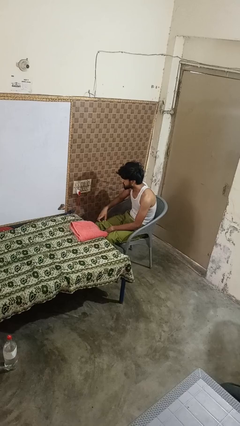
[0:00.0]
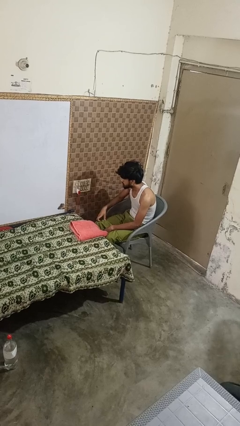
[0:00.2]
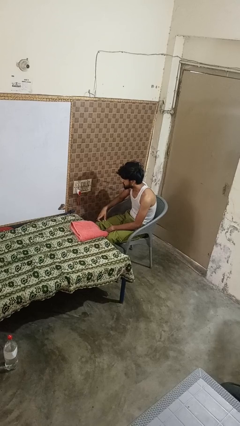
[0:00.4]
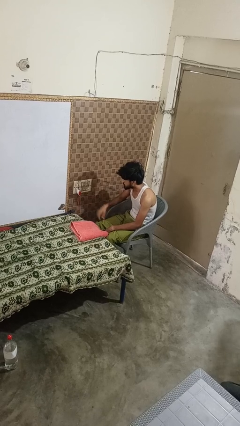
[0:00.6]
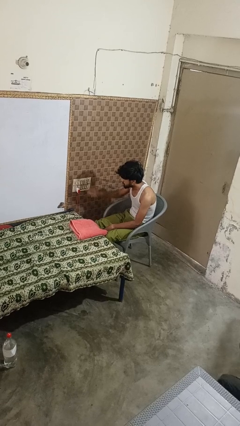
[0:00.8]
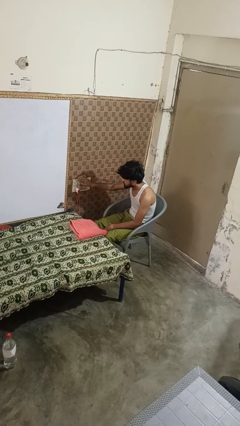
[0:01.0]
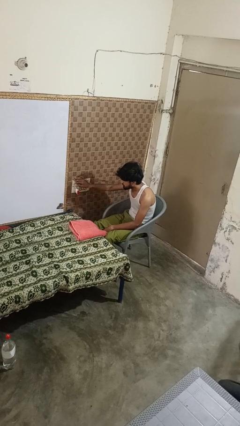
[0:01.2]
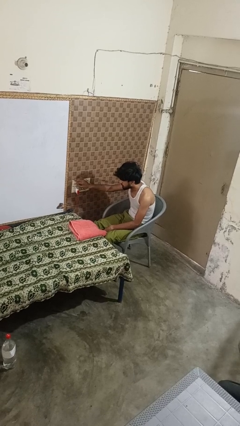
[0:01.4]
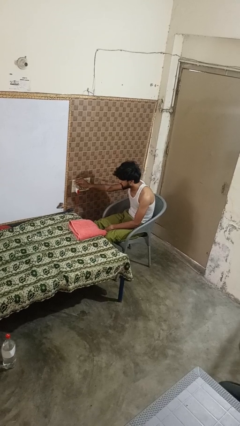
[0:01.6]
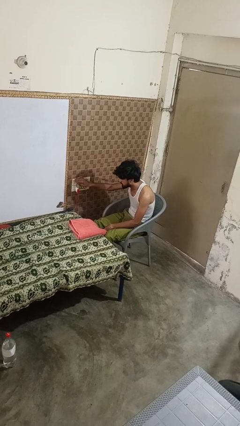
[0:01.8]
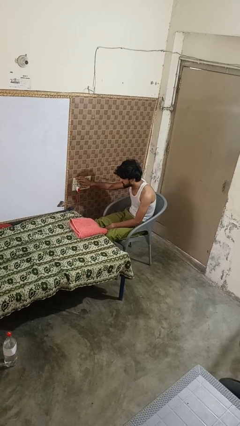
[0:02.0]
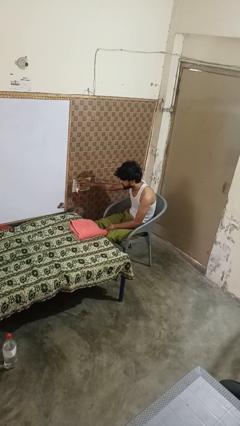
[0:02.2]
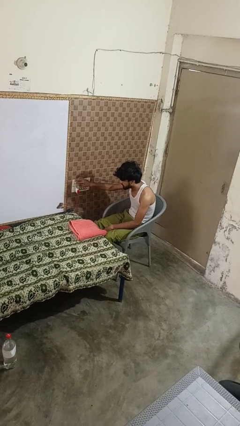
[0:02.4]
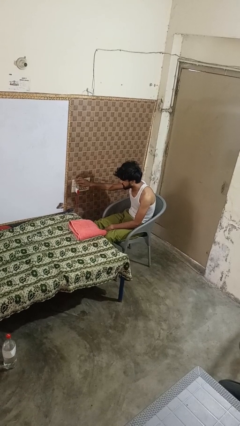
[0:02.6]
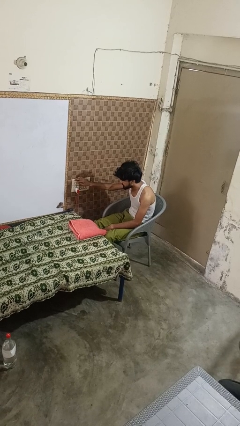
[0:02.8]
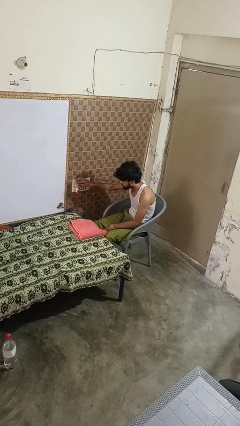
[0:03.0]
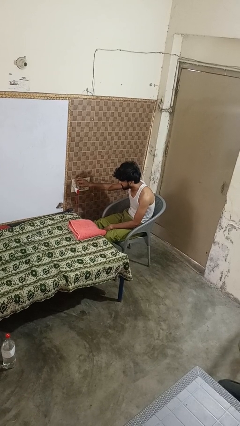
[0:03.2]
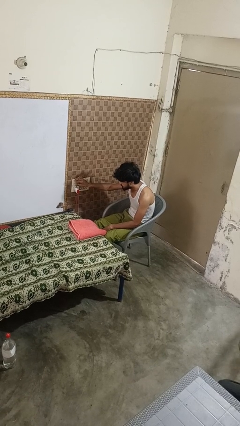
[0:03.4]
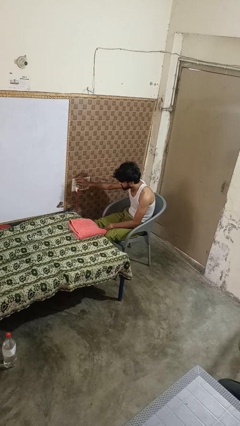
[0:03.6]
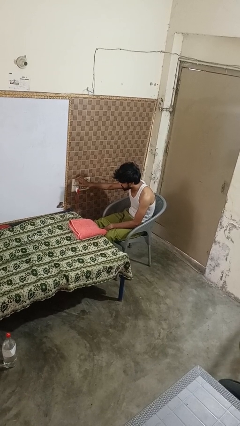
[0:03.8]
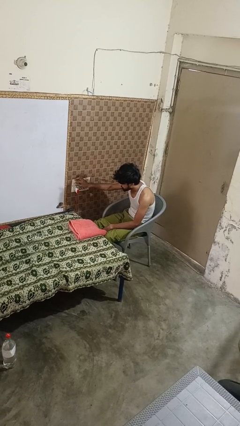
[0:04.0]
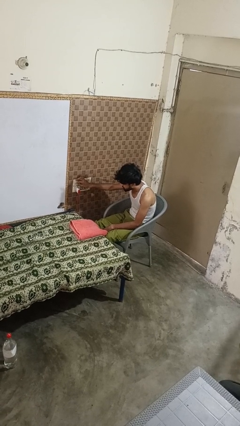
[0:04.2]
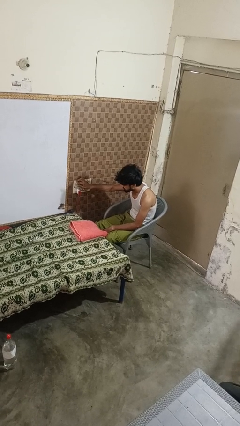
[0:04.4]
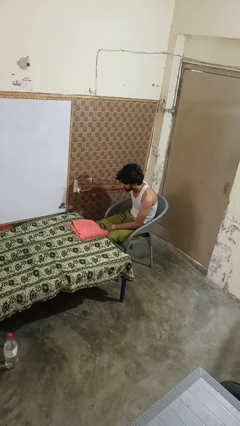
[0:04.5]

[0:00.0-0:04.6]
person adjusts thermostat

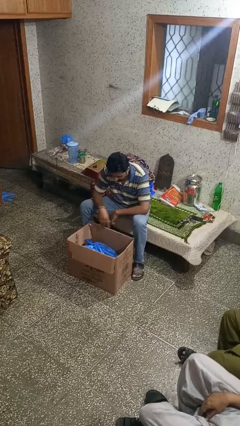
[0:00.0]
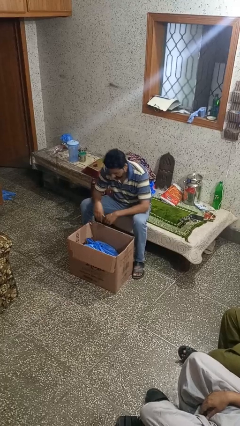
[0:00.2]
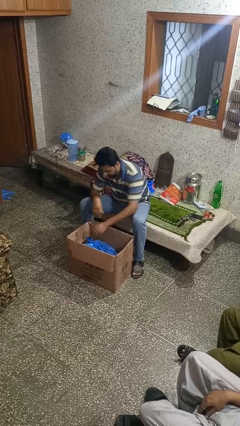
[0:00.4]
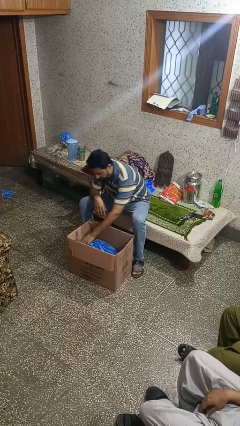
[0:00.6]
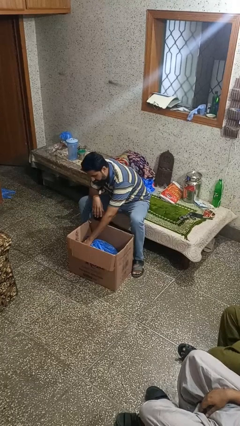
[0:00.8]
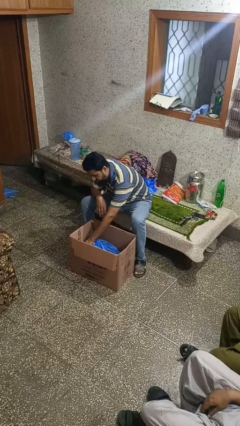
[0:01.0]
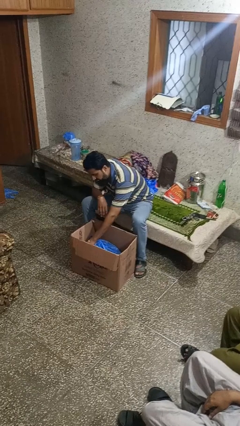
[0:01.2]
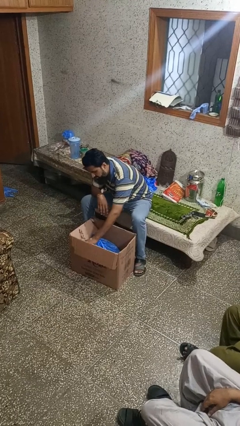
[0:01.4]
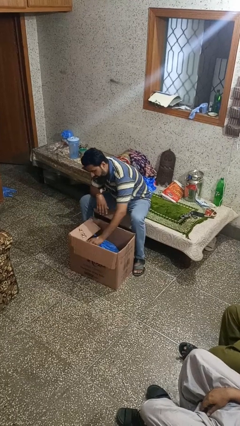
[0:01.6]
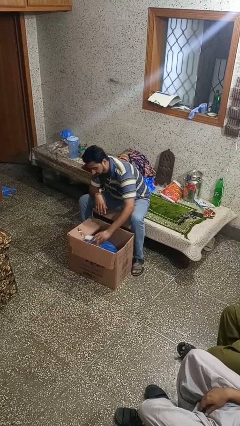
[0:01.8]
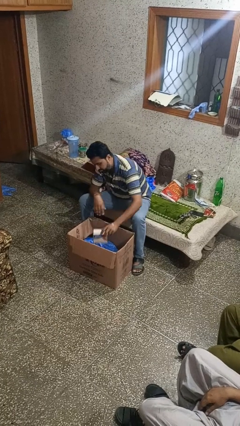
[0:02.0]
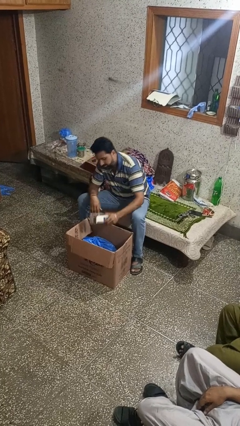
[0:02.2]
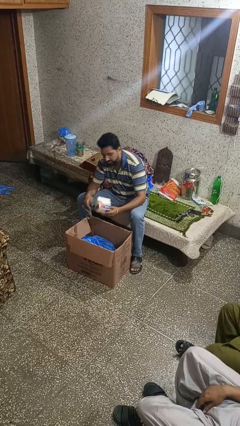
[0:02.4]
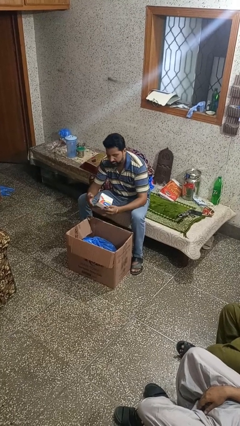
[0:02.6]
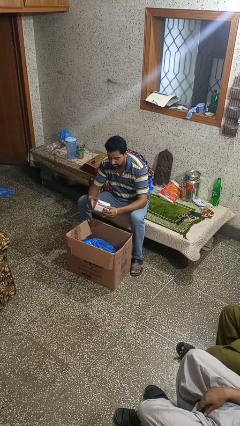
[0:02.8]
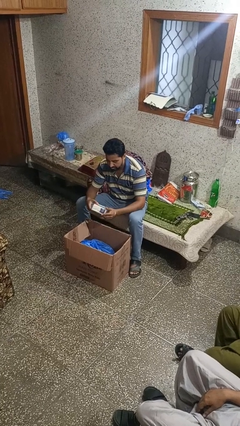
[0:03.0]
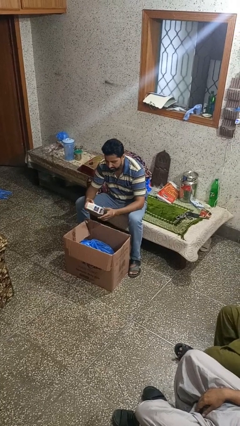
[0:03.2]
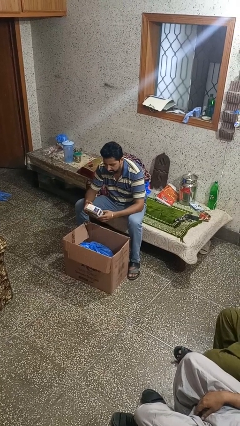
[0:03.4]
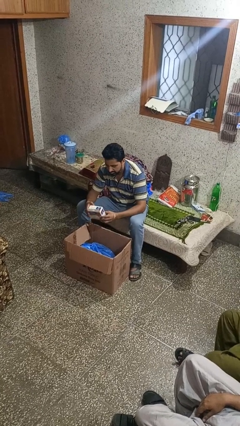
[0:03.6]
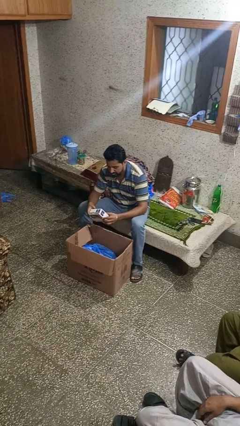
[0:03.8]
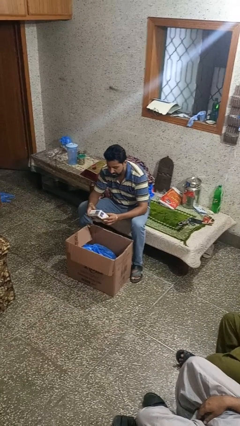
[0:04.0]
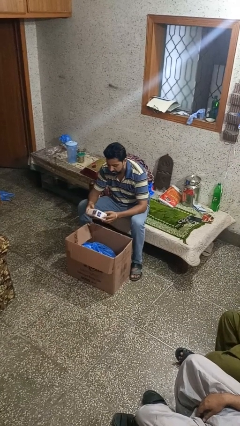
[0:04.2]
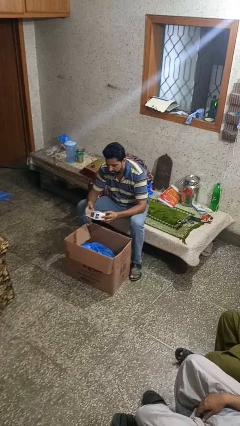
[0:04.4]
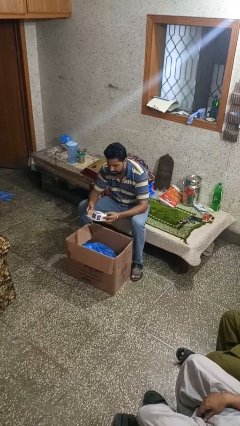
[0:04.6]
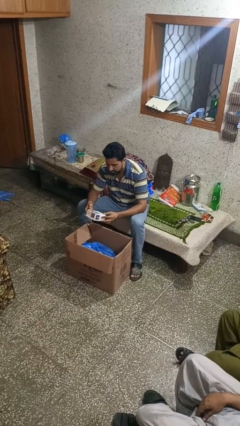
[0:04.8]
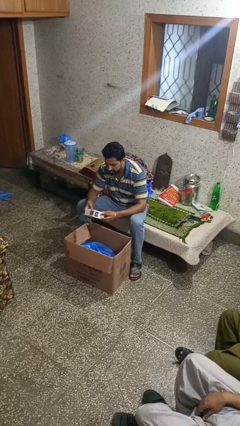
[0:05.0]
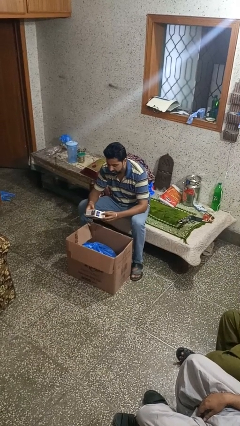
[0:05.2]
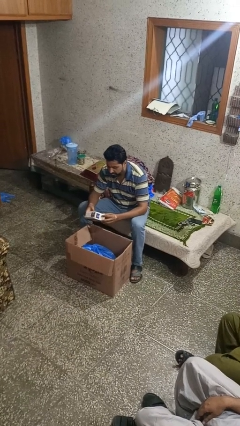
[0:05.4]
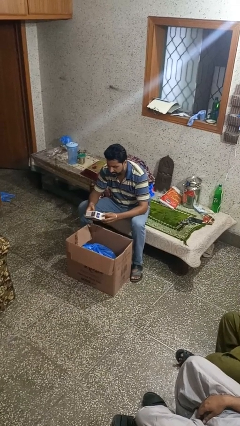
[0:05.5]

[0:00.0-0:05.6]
person takes object from box

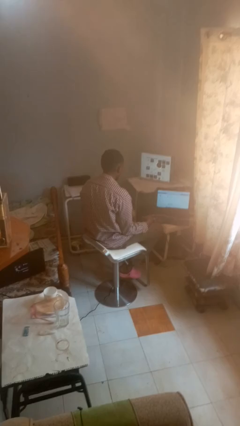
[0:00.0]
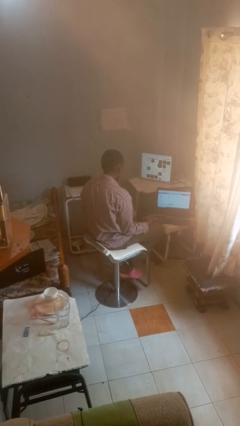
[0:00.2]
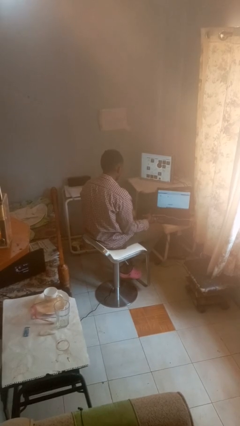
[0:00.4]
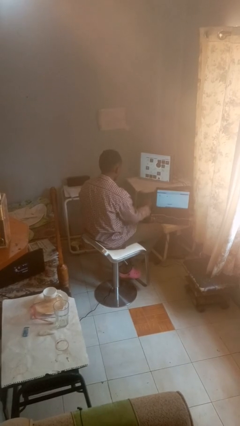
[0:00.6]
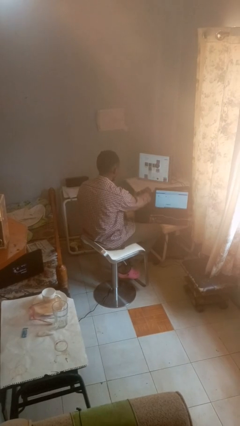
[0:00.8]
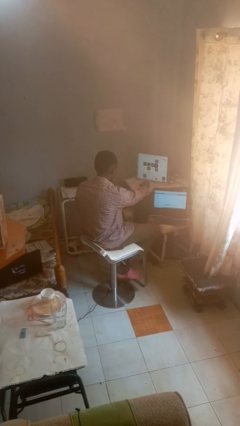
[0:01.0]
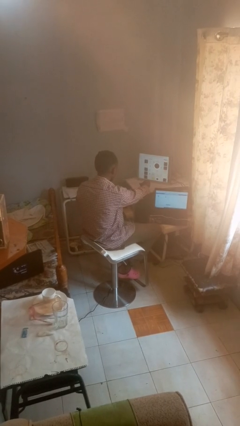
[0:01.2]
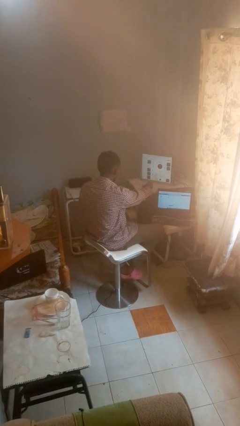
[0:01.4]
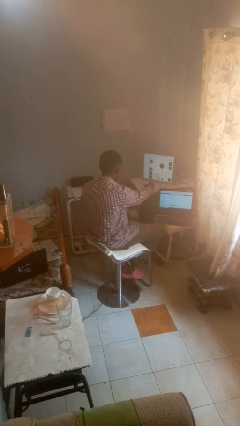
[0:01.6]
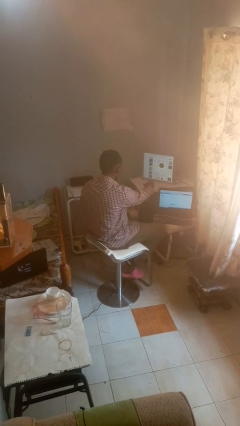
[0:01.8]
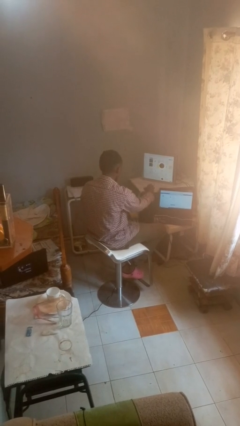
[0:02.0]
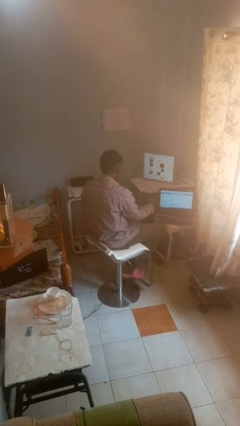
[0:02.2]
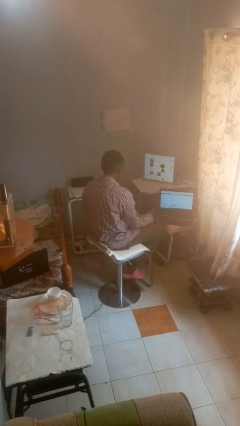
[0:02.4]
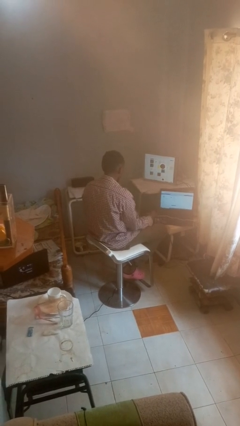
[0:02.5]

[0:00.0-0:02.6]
person uses television remote

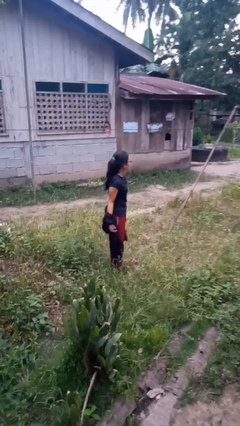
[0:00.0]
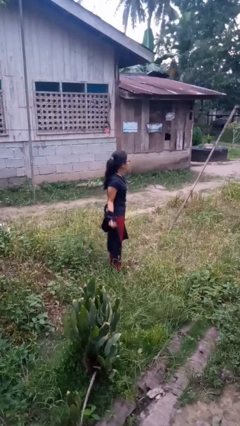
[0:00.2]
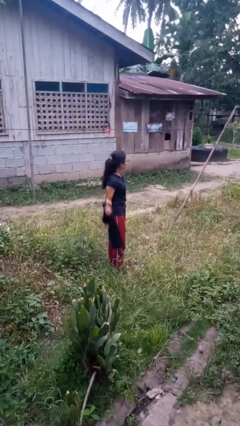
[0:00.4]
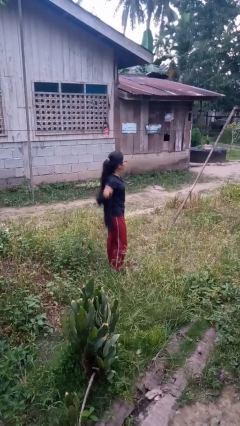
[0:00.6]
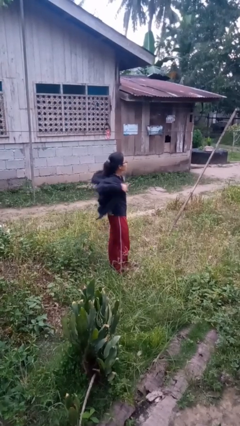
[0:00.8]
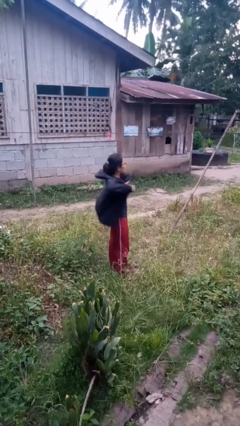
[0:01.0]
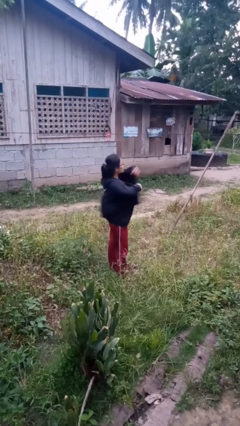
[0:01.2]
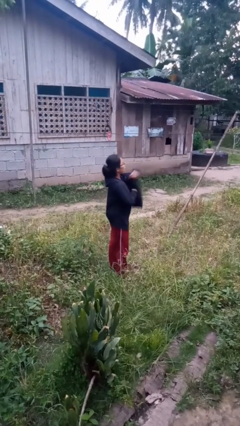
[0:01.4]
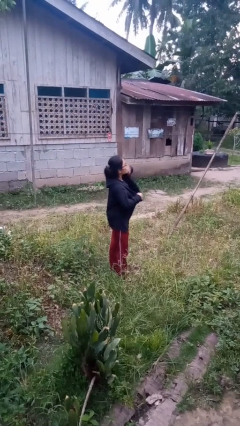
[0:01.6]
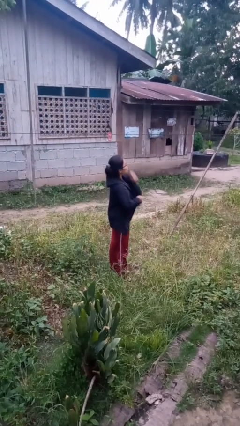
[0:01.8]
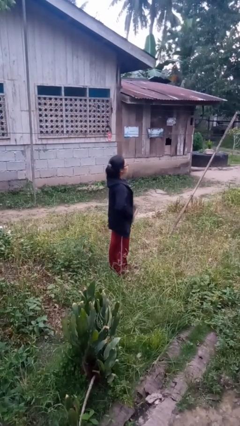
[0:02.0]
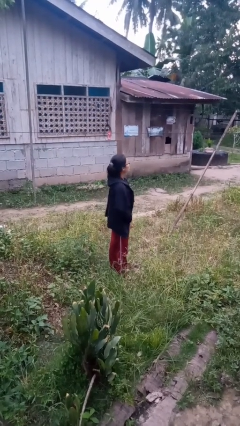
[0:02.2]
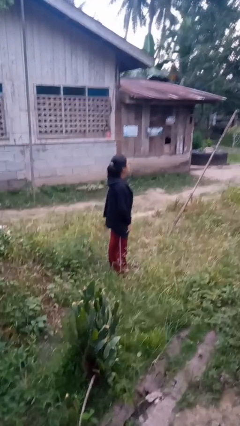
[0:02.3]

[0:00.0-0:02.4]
person puts on jacket

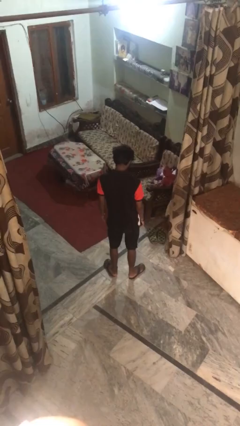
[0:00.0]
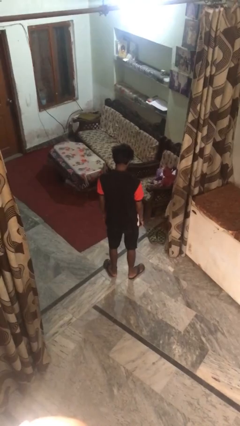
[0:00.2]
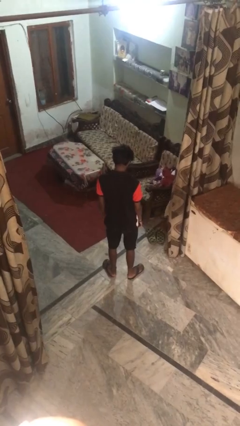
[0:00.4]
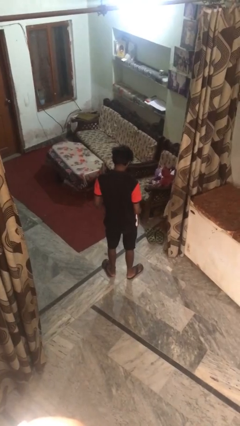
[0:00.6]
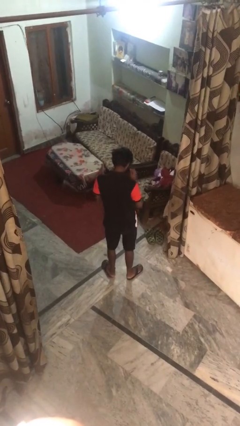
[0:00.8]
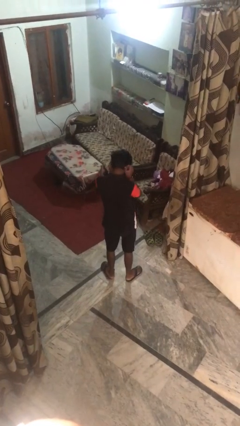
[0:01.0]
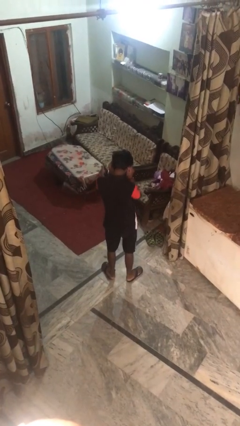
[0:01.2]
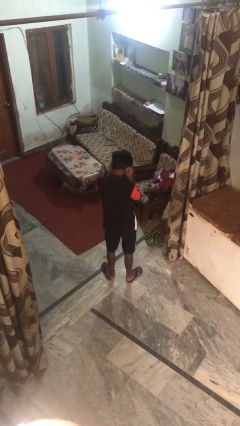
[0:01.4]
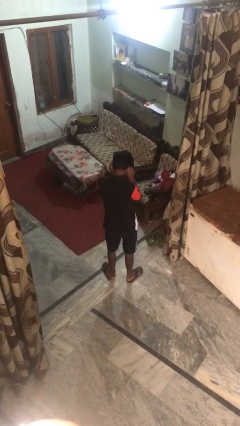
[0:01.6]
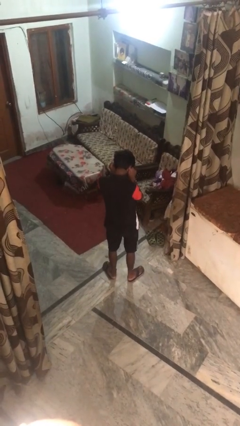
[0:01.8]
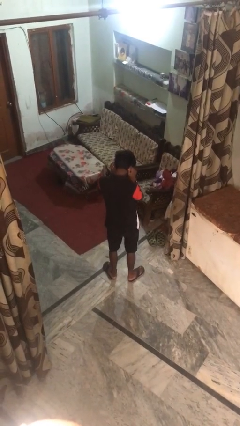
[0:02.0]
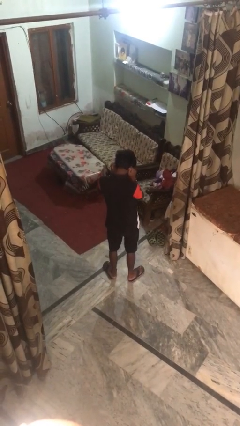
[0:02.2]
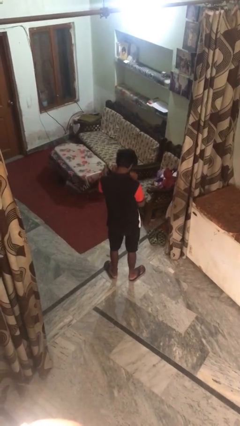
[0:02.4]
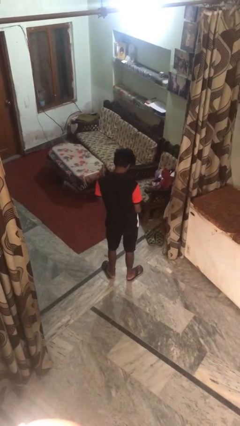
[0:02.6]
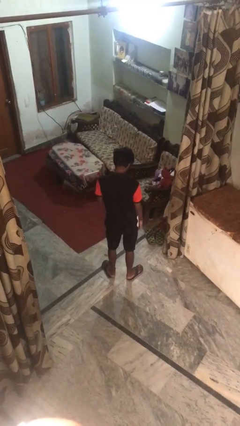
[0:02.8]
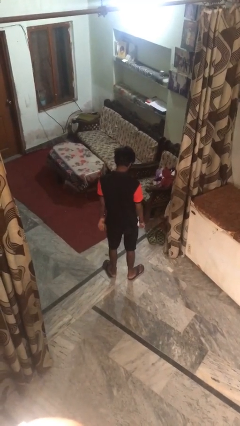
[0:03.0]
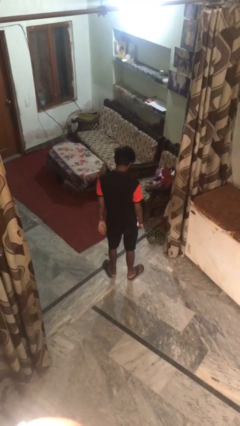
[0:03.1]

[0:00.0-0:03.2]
person touches earlobe
